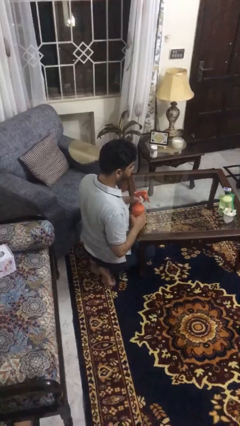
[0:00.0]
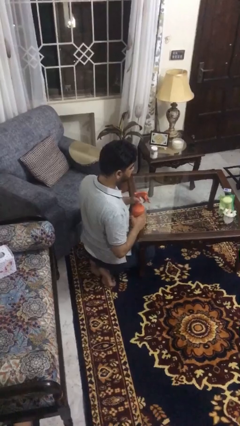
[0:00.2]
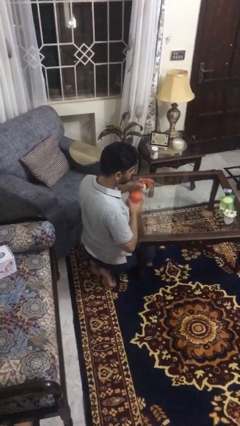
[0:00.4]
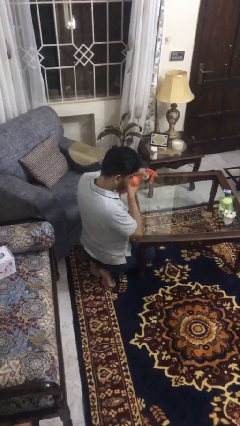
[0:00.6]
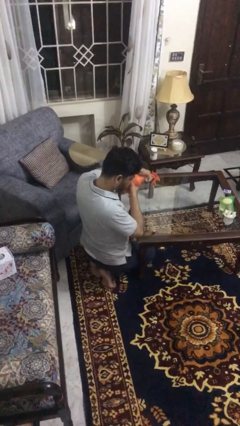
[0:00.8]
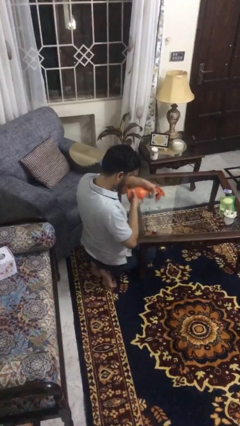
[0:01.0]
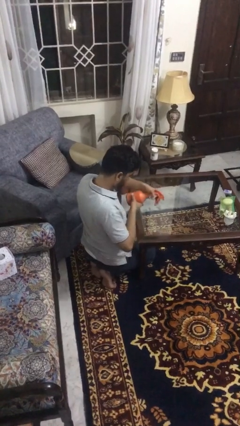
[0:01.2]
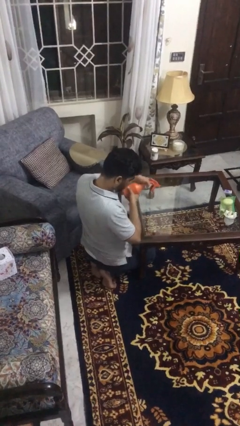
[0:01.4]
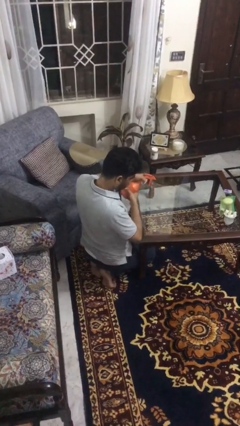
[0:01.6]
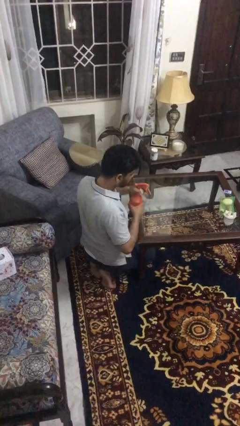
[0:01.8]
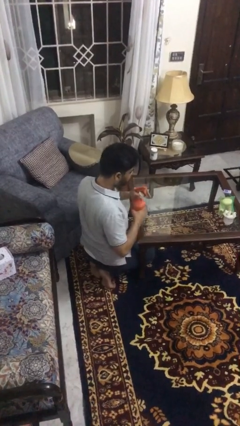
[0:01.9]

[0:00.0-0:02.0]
person sprays from bottle

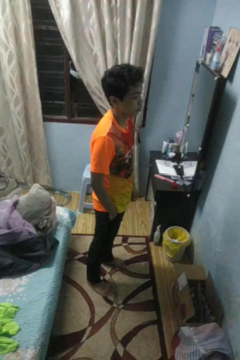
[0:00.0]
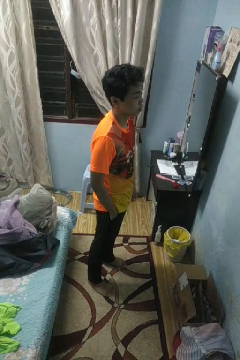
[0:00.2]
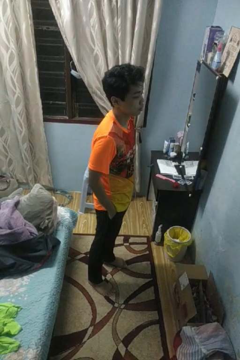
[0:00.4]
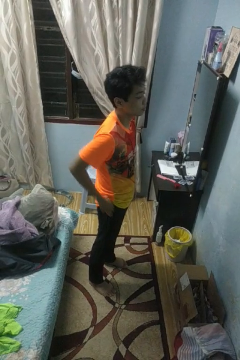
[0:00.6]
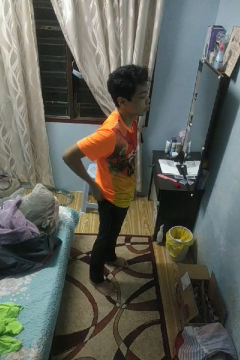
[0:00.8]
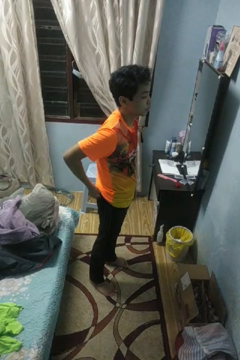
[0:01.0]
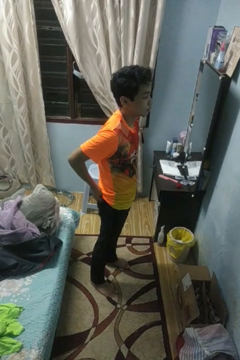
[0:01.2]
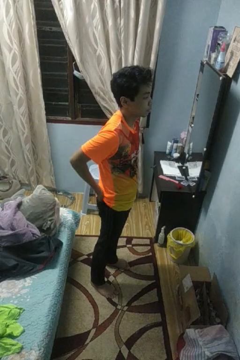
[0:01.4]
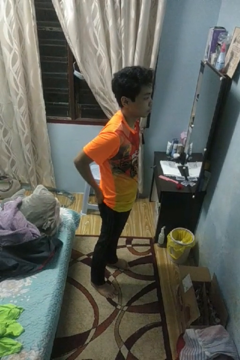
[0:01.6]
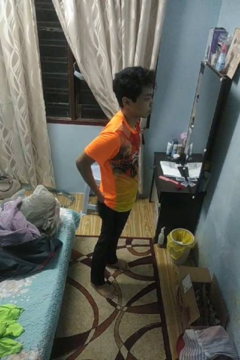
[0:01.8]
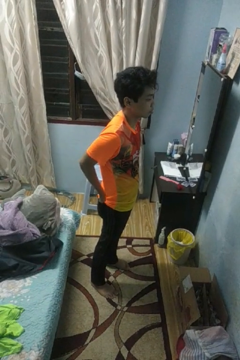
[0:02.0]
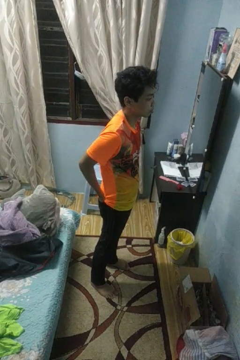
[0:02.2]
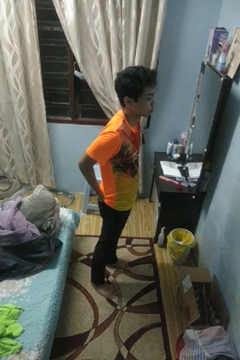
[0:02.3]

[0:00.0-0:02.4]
person puts hands in back pockets

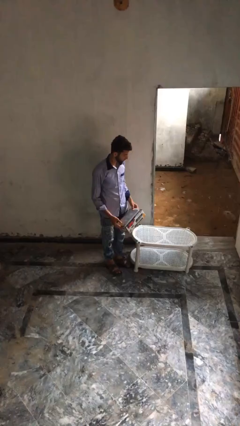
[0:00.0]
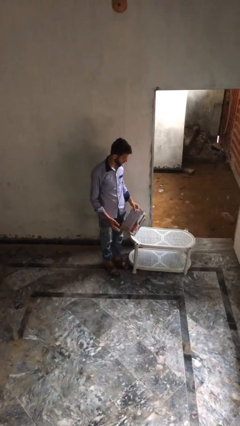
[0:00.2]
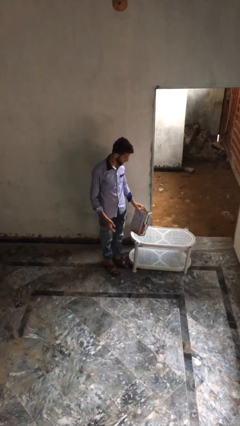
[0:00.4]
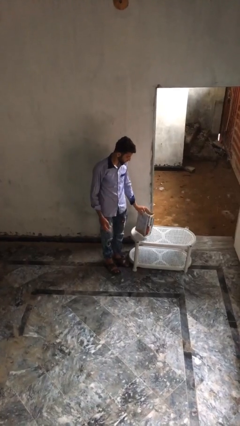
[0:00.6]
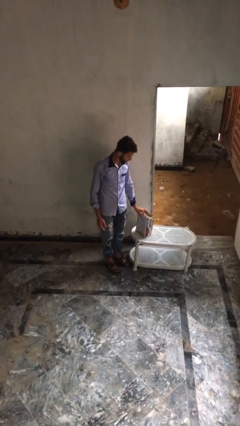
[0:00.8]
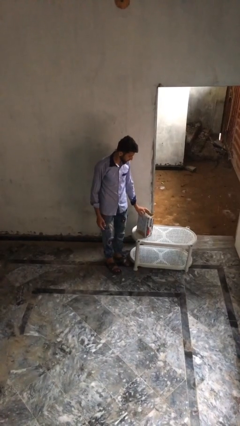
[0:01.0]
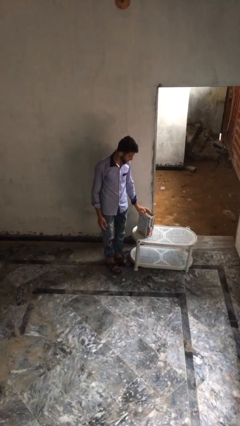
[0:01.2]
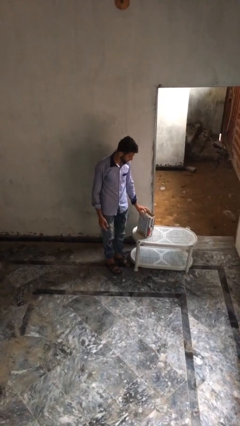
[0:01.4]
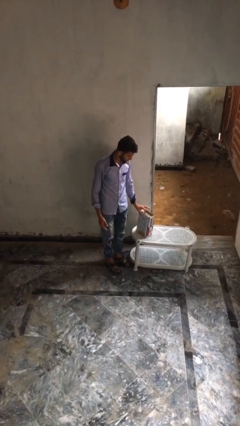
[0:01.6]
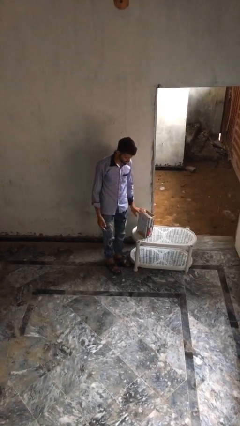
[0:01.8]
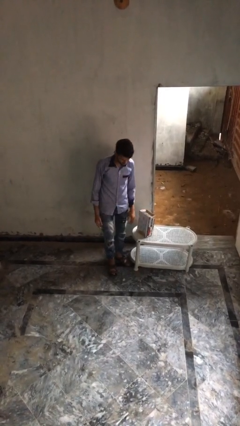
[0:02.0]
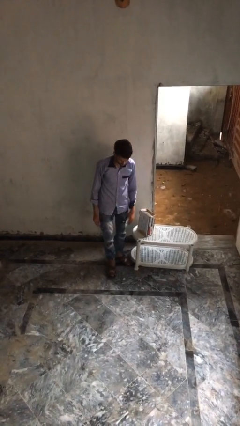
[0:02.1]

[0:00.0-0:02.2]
person puts down object on table

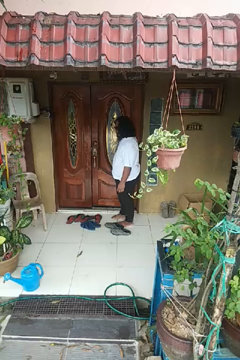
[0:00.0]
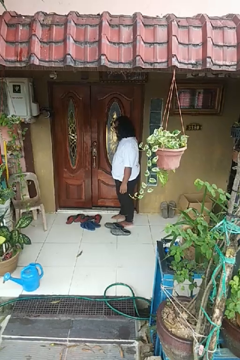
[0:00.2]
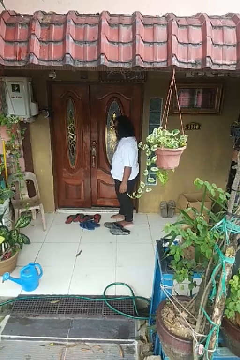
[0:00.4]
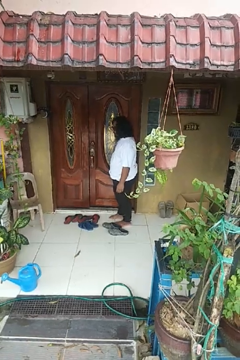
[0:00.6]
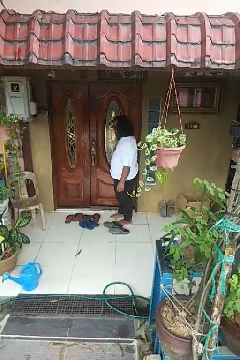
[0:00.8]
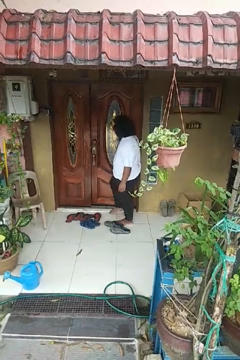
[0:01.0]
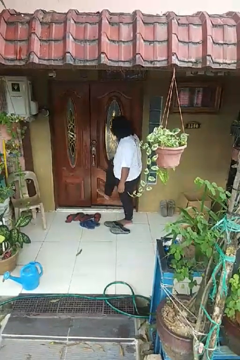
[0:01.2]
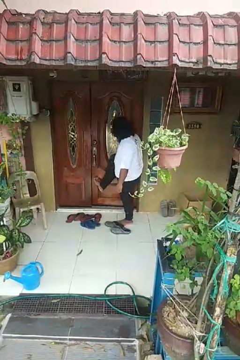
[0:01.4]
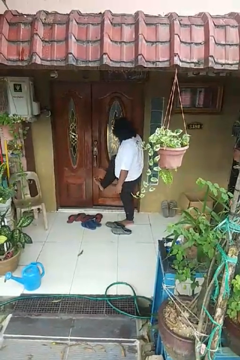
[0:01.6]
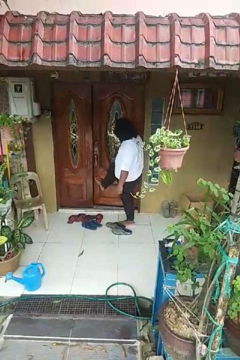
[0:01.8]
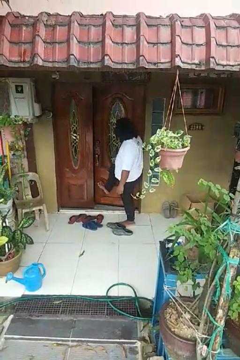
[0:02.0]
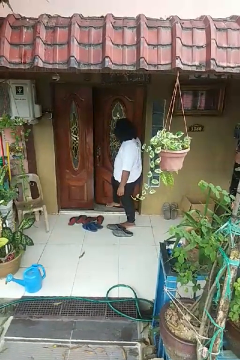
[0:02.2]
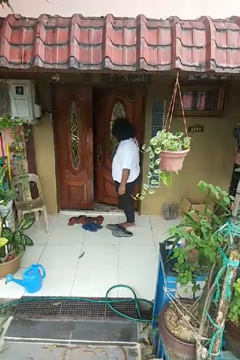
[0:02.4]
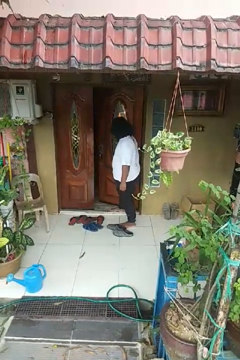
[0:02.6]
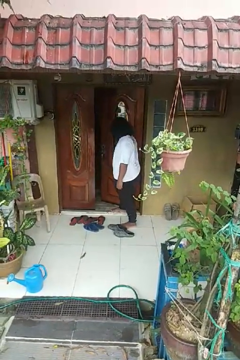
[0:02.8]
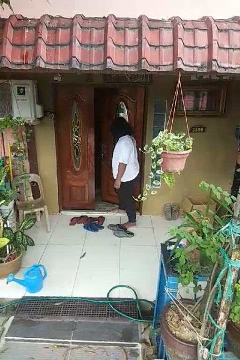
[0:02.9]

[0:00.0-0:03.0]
person opens facility door

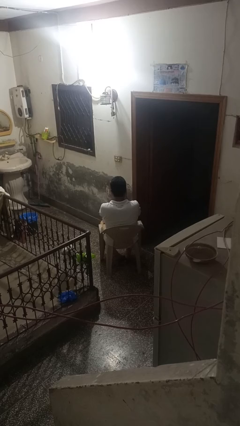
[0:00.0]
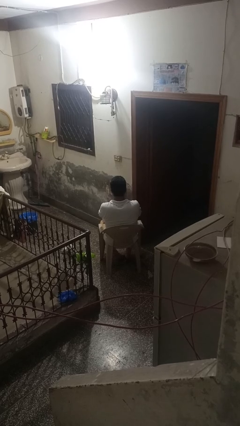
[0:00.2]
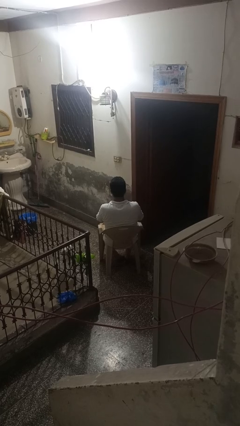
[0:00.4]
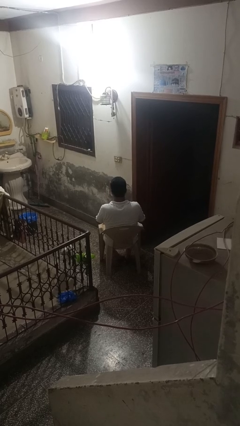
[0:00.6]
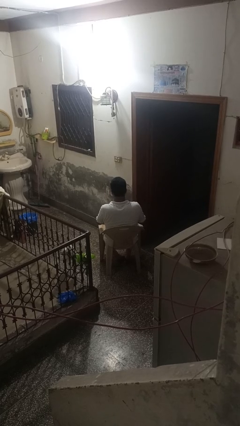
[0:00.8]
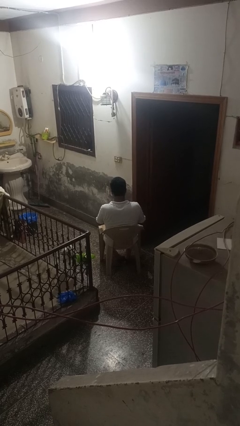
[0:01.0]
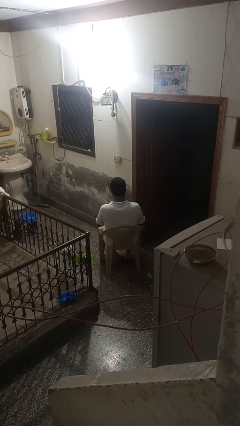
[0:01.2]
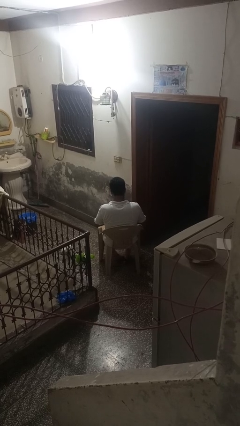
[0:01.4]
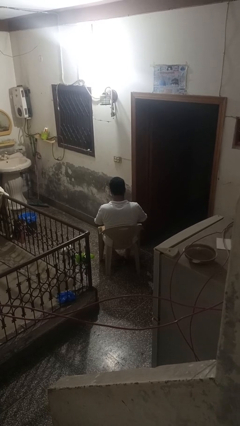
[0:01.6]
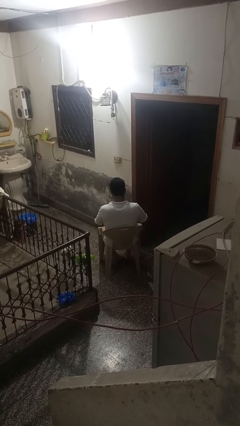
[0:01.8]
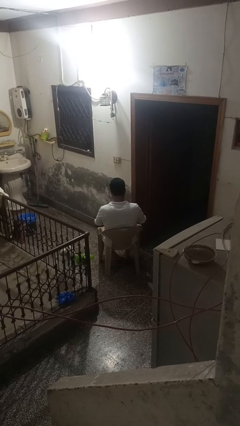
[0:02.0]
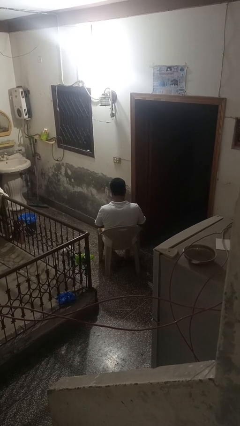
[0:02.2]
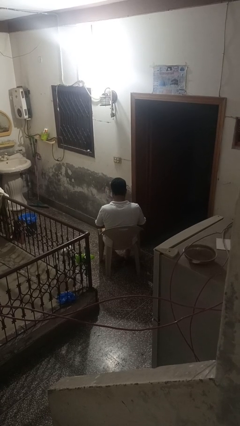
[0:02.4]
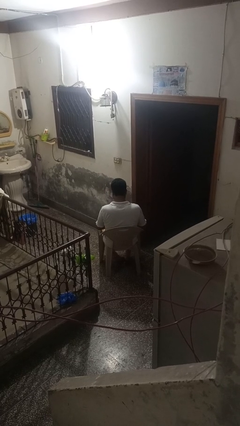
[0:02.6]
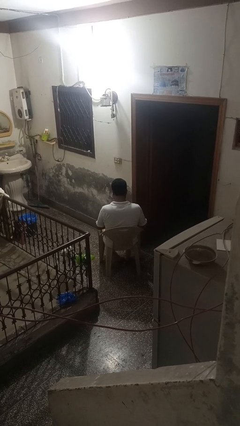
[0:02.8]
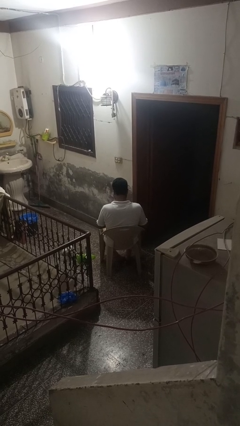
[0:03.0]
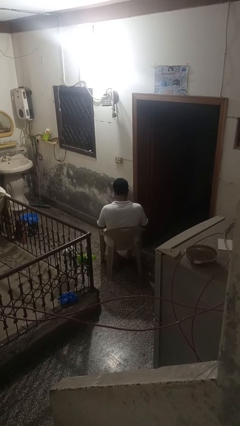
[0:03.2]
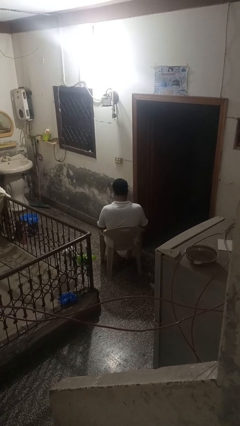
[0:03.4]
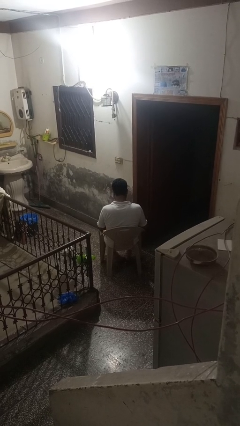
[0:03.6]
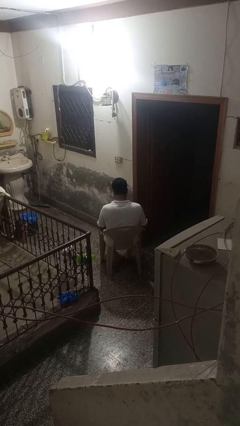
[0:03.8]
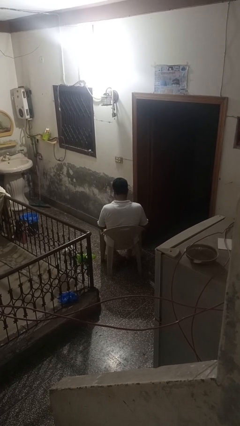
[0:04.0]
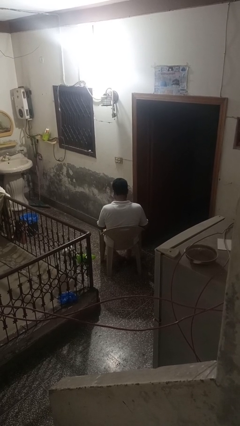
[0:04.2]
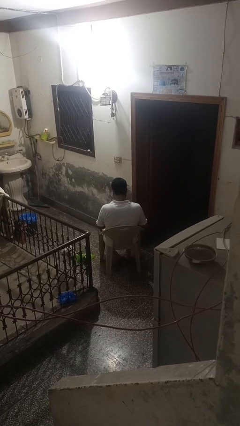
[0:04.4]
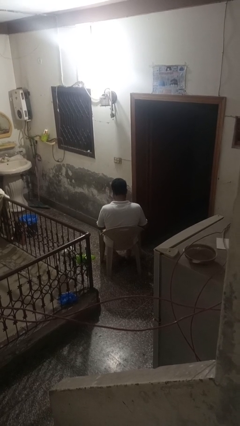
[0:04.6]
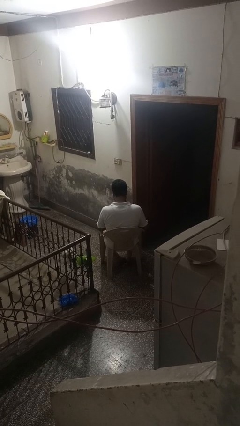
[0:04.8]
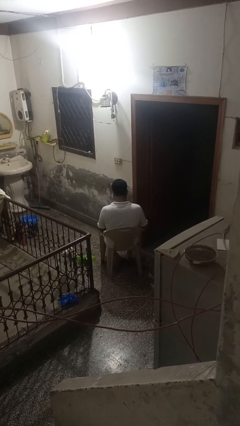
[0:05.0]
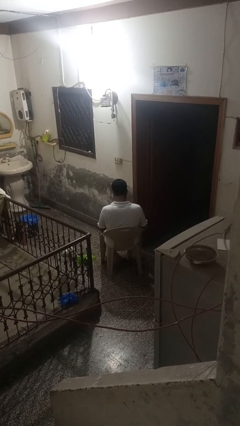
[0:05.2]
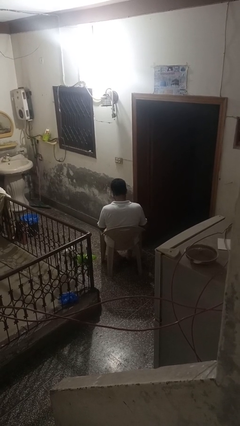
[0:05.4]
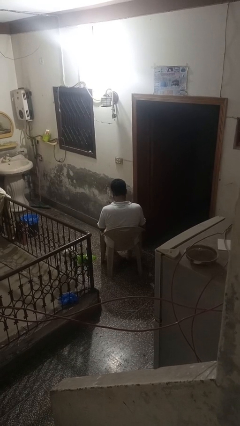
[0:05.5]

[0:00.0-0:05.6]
person washes hands

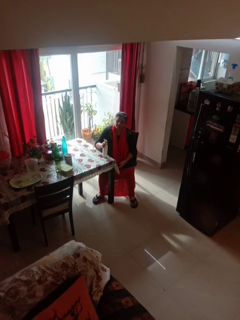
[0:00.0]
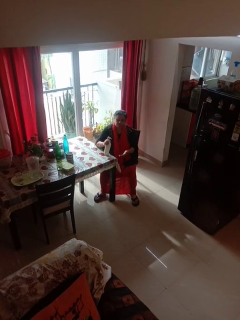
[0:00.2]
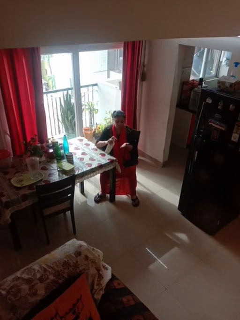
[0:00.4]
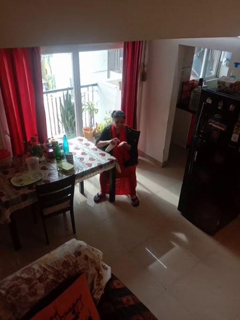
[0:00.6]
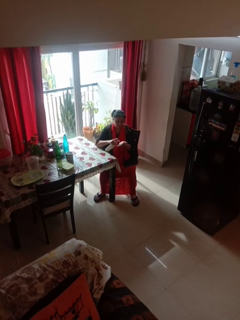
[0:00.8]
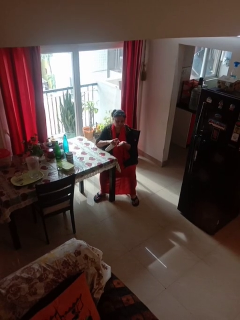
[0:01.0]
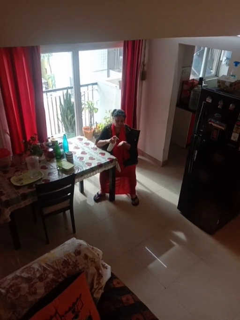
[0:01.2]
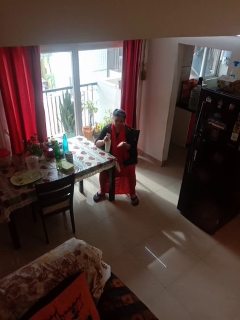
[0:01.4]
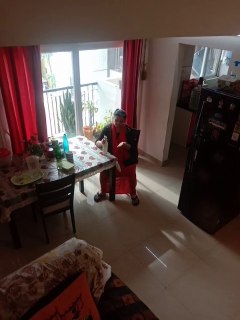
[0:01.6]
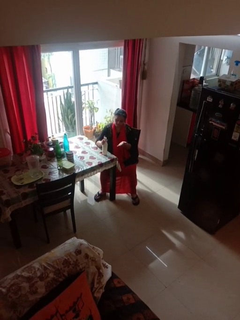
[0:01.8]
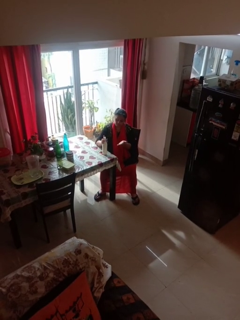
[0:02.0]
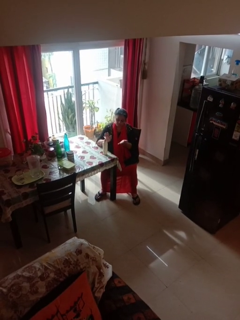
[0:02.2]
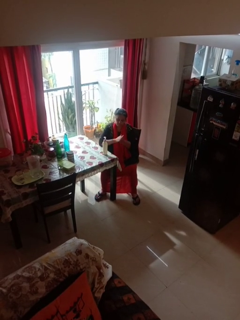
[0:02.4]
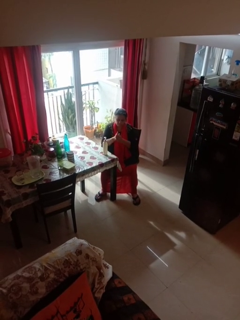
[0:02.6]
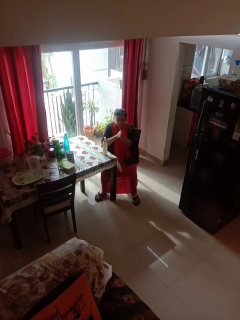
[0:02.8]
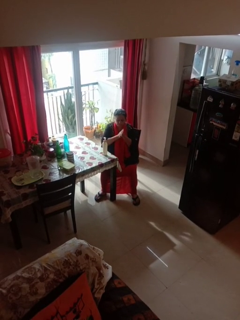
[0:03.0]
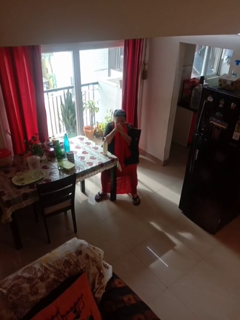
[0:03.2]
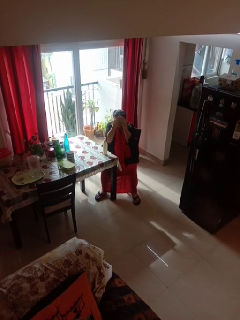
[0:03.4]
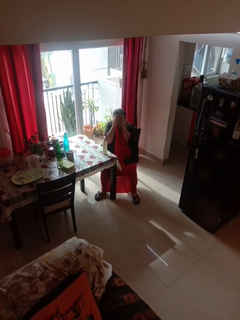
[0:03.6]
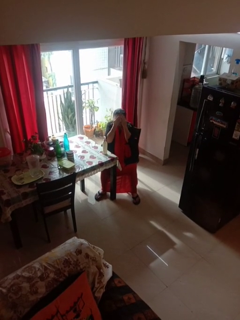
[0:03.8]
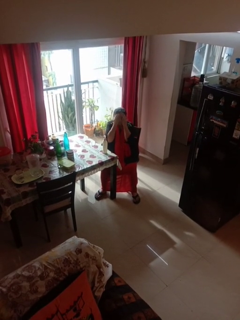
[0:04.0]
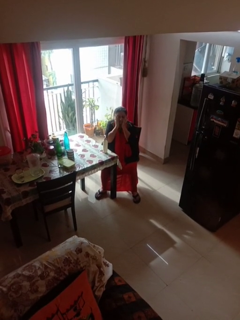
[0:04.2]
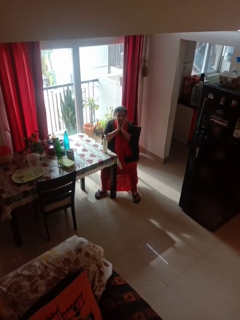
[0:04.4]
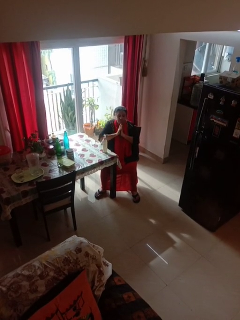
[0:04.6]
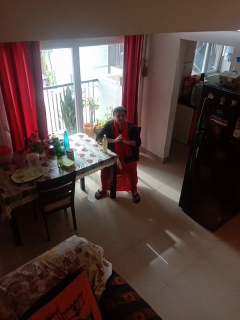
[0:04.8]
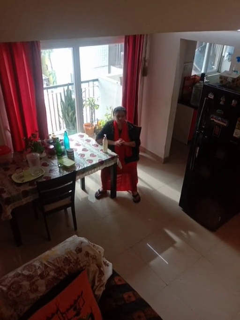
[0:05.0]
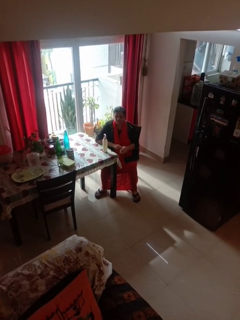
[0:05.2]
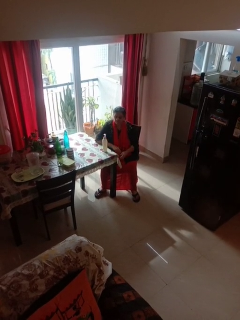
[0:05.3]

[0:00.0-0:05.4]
person applies facial moisturizer
